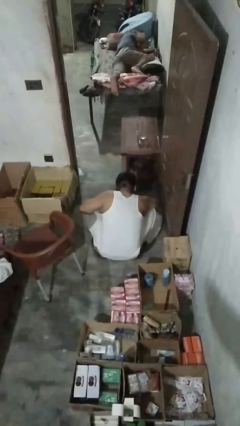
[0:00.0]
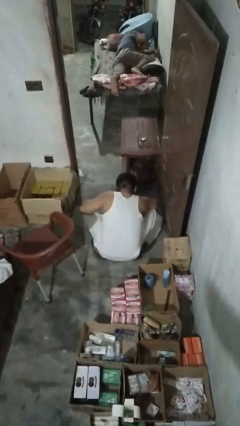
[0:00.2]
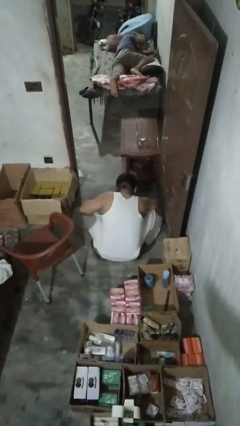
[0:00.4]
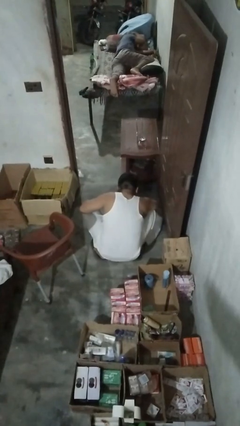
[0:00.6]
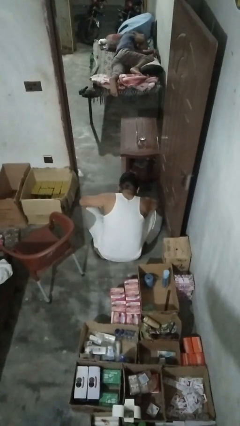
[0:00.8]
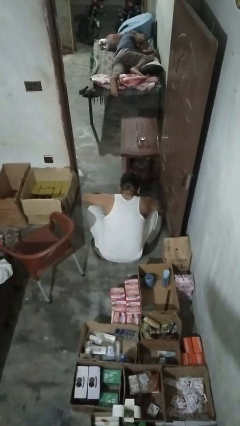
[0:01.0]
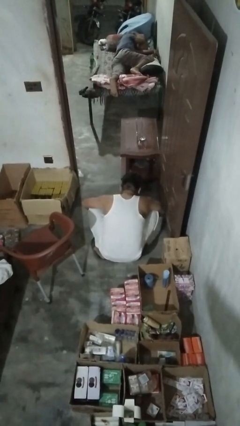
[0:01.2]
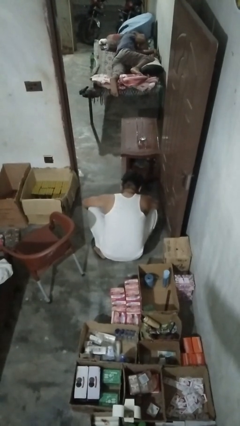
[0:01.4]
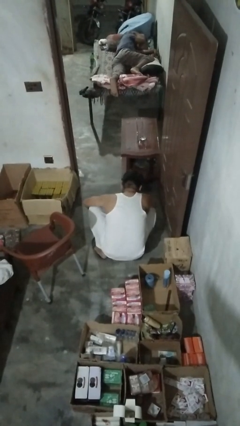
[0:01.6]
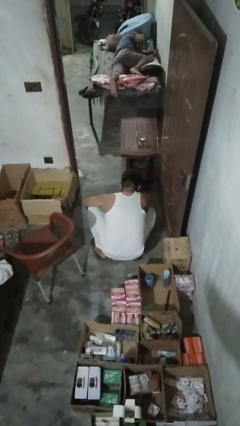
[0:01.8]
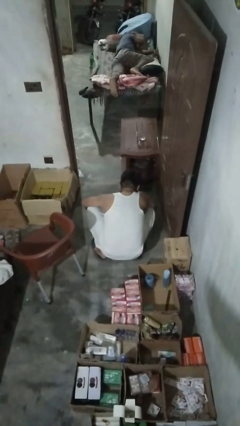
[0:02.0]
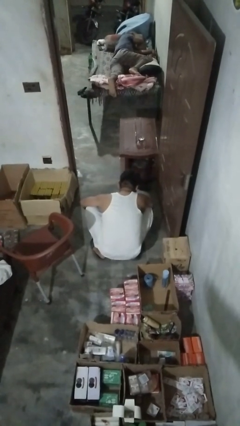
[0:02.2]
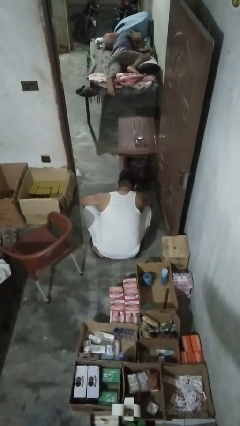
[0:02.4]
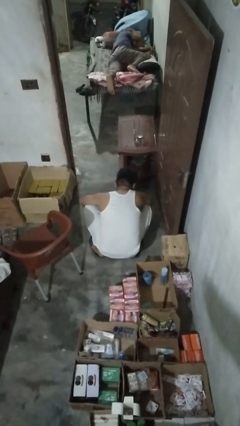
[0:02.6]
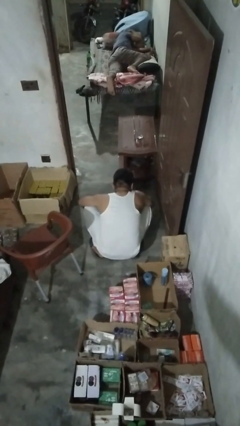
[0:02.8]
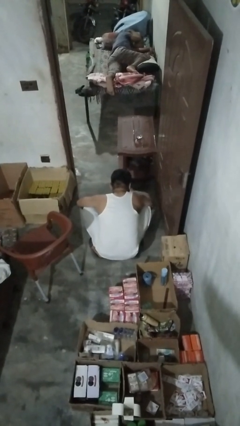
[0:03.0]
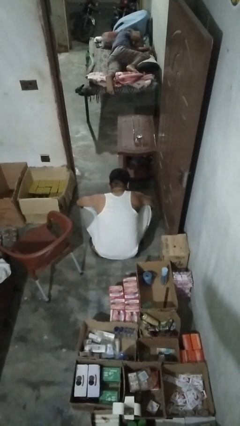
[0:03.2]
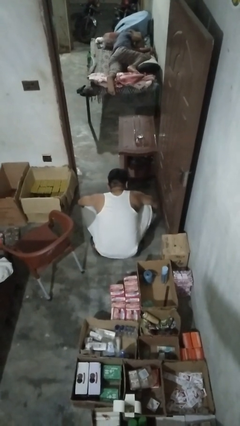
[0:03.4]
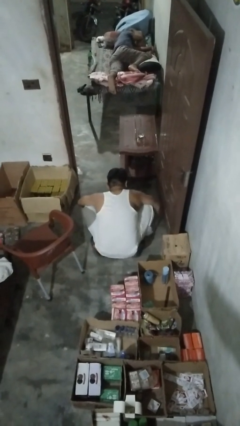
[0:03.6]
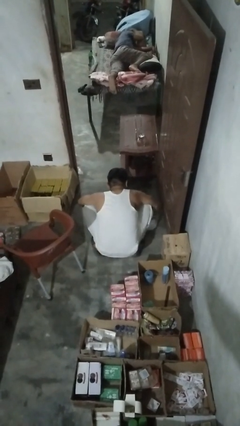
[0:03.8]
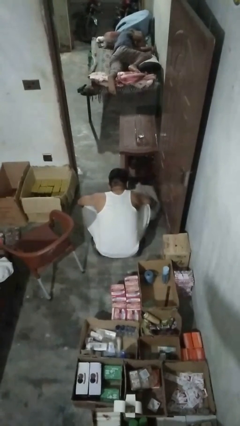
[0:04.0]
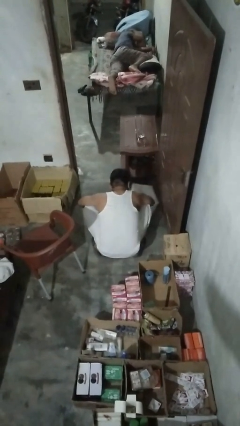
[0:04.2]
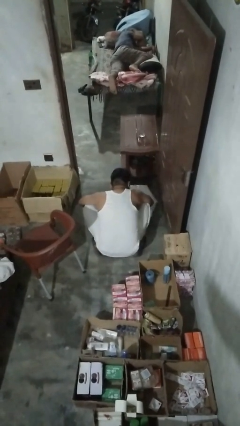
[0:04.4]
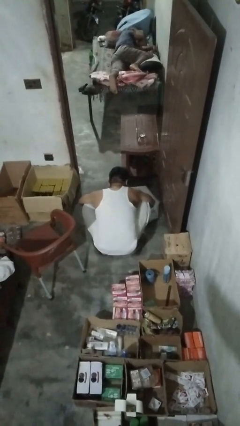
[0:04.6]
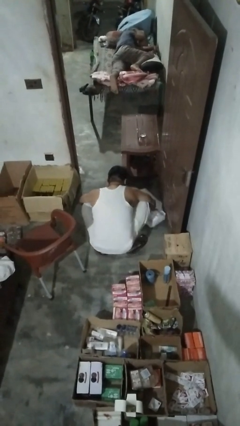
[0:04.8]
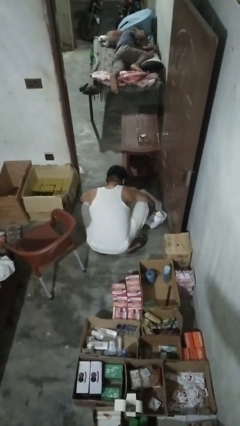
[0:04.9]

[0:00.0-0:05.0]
person mops

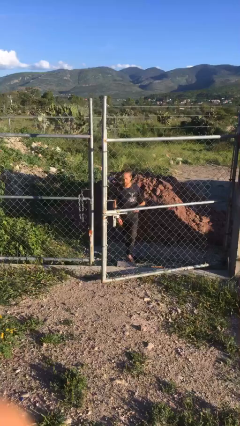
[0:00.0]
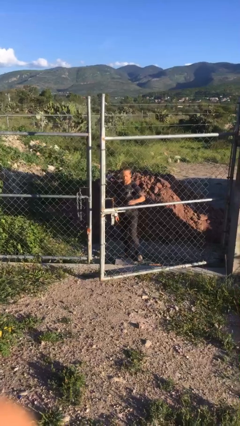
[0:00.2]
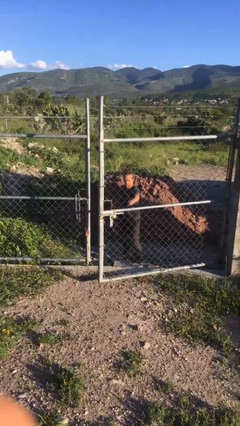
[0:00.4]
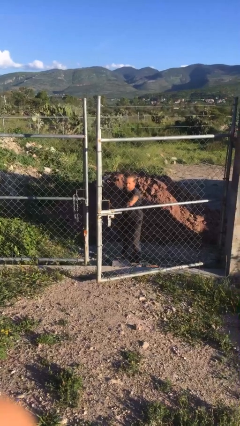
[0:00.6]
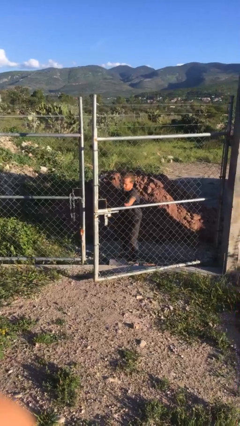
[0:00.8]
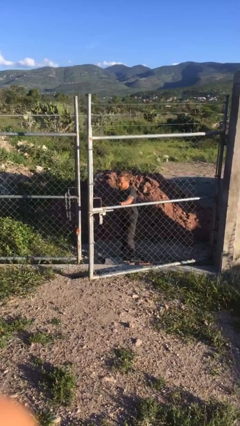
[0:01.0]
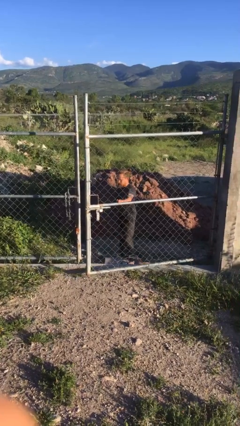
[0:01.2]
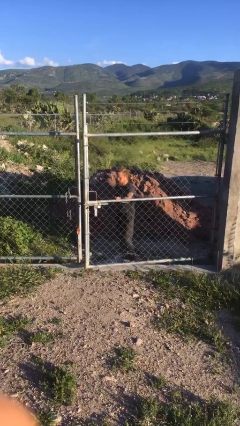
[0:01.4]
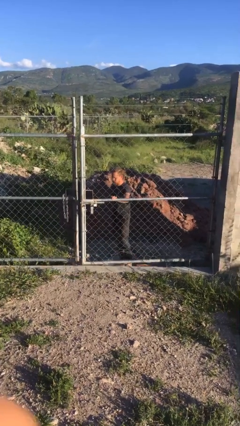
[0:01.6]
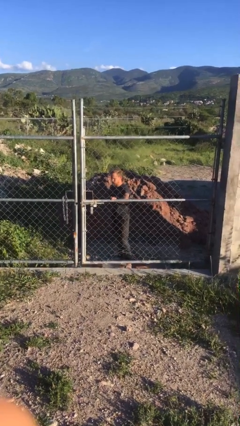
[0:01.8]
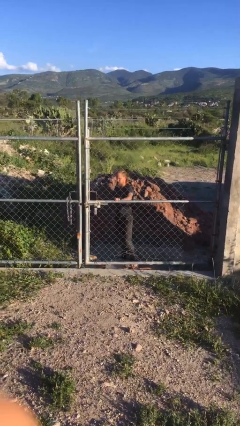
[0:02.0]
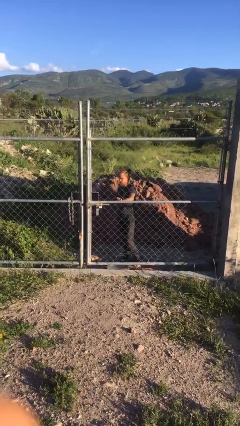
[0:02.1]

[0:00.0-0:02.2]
person closes gate

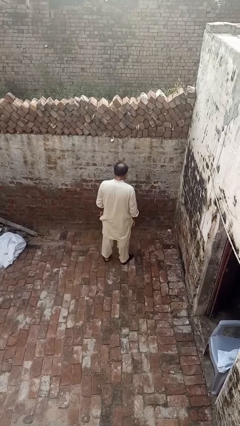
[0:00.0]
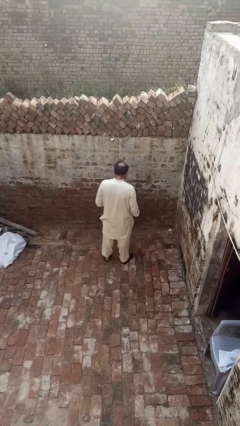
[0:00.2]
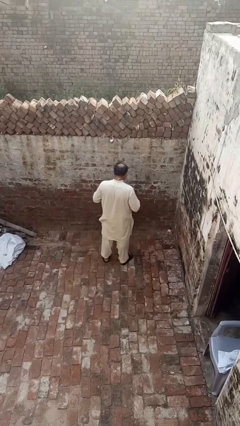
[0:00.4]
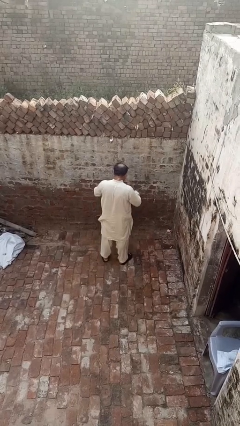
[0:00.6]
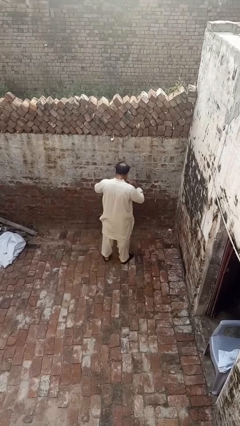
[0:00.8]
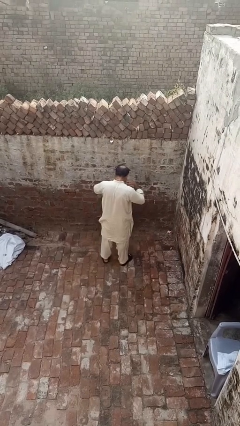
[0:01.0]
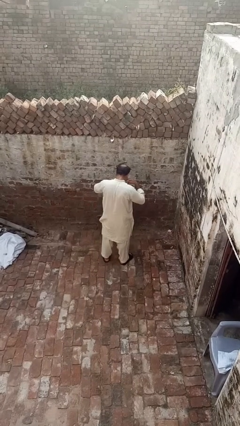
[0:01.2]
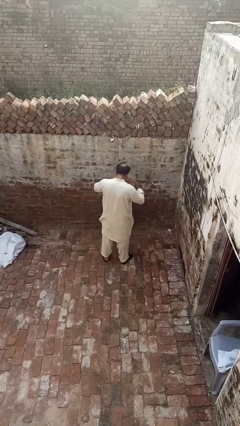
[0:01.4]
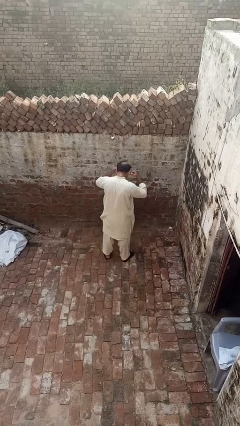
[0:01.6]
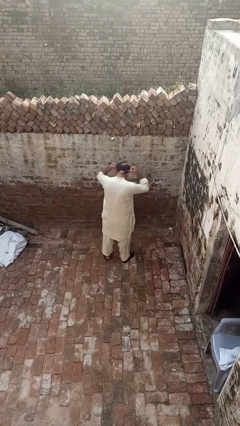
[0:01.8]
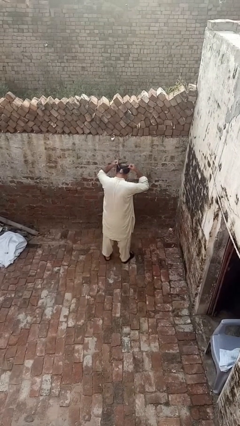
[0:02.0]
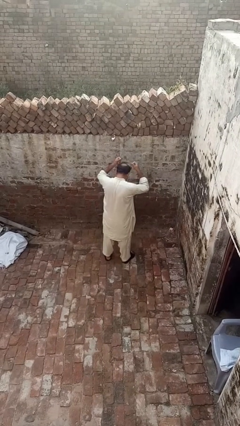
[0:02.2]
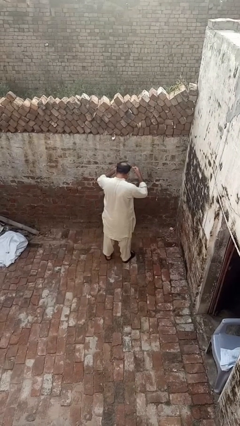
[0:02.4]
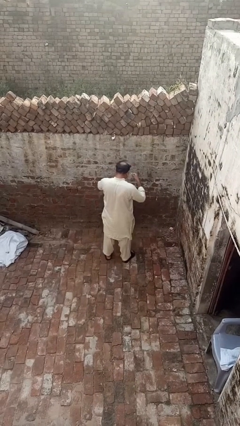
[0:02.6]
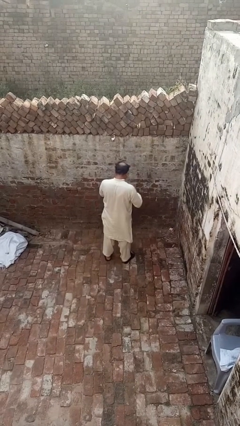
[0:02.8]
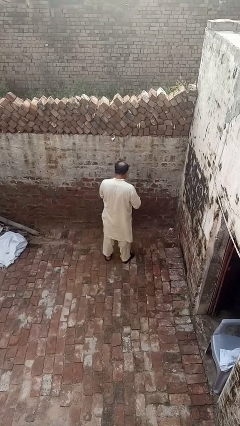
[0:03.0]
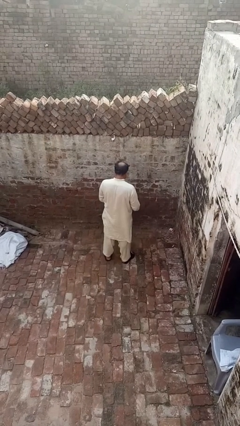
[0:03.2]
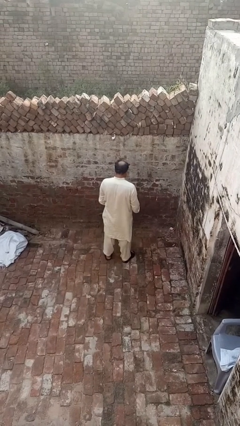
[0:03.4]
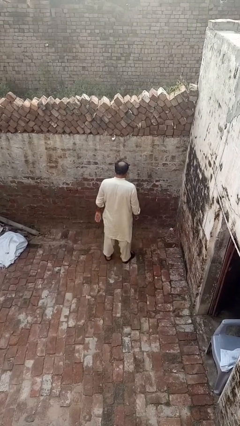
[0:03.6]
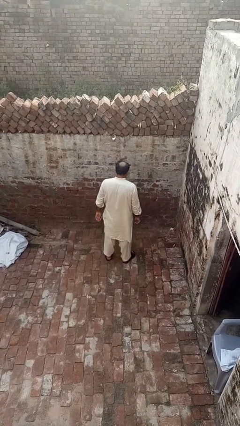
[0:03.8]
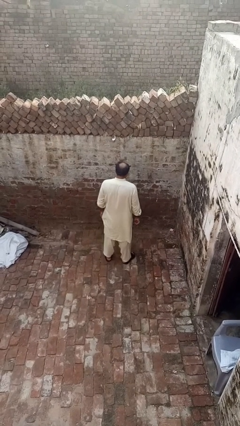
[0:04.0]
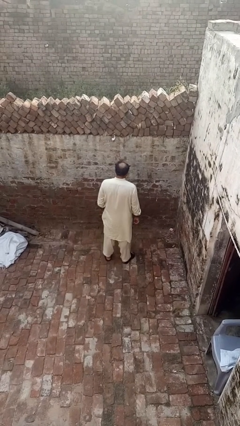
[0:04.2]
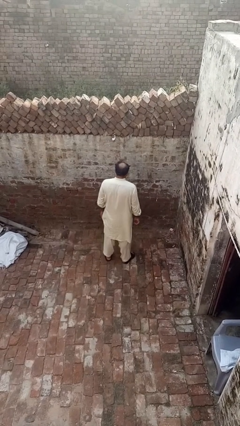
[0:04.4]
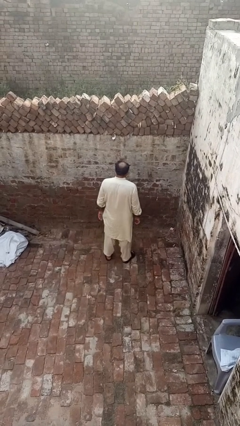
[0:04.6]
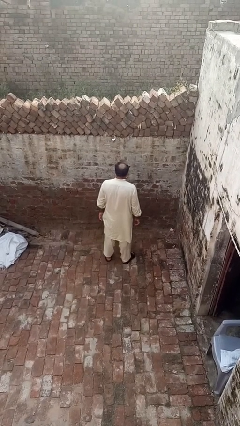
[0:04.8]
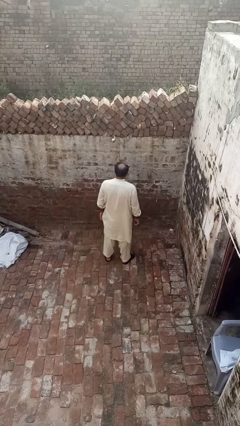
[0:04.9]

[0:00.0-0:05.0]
person takes off necklace

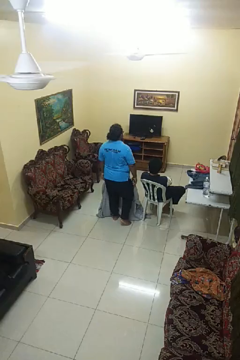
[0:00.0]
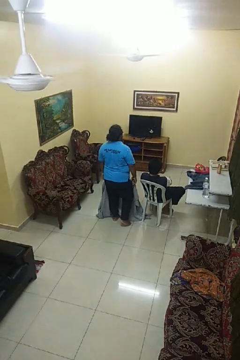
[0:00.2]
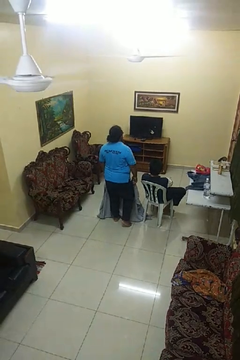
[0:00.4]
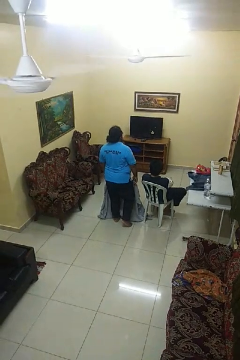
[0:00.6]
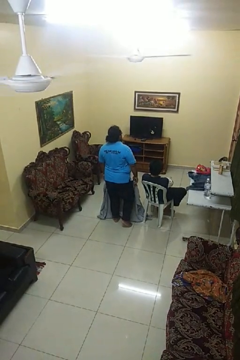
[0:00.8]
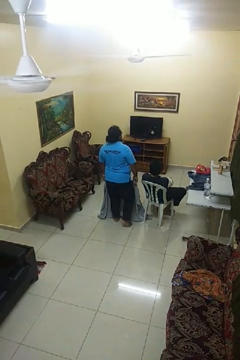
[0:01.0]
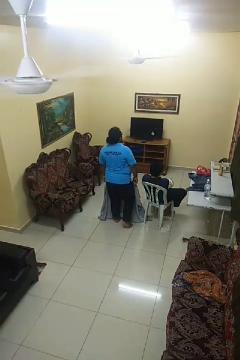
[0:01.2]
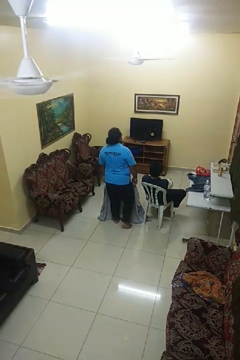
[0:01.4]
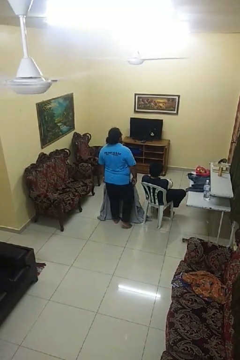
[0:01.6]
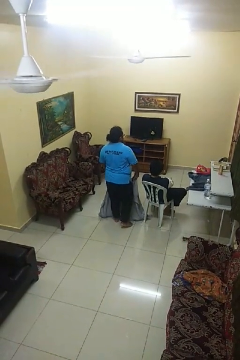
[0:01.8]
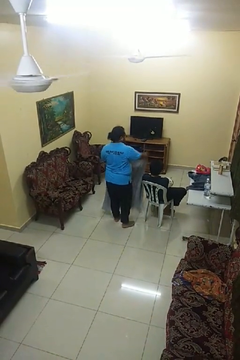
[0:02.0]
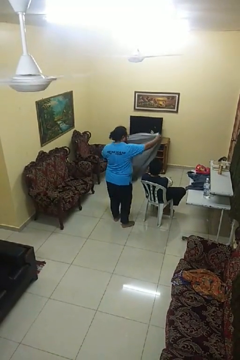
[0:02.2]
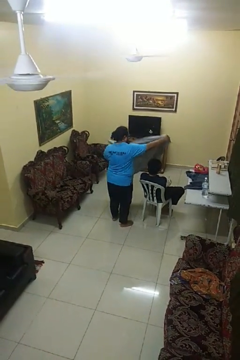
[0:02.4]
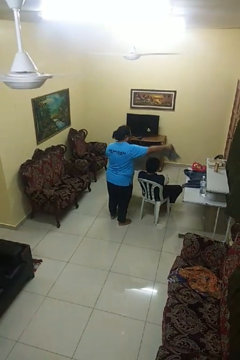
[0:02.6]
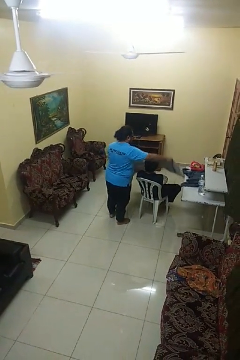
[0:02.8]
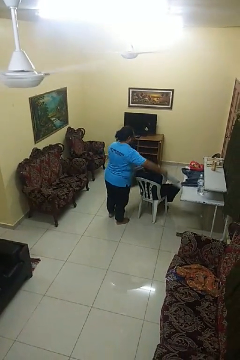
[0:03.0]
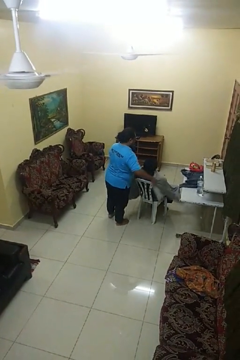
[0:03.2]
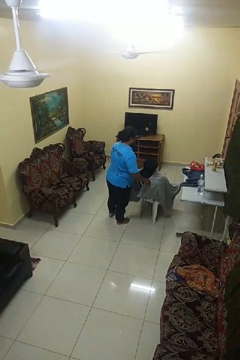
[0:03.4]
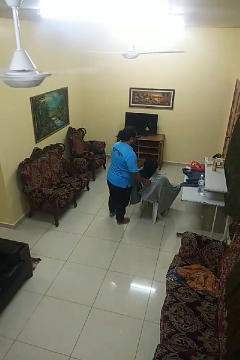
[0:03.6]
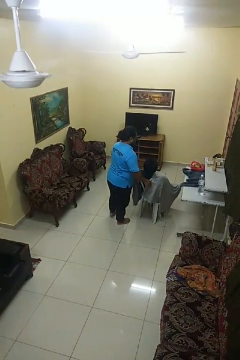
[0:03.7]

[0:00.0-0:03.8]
person covers friend with blanket

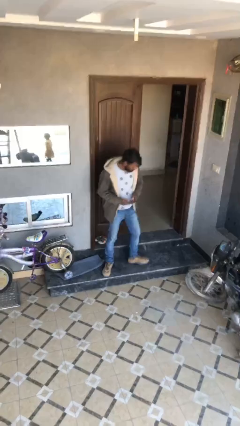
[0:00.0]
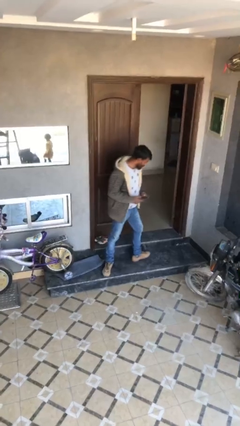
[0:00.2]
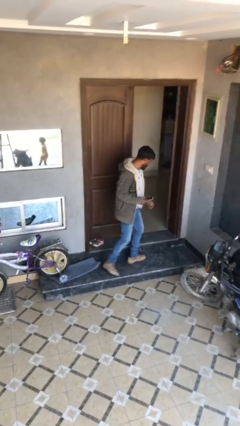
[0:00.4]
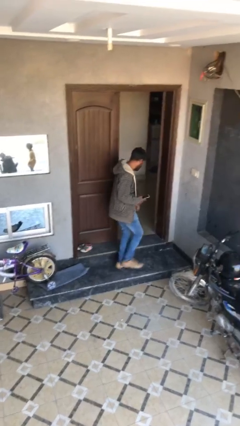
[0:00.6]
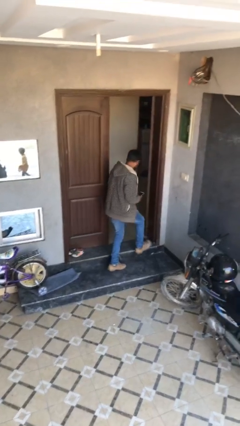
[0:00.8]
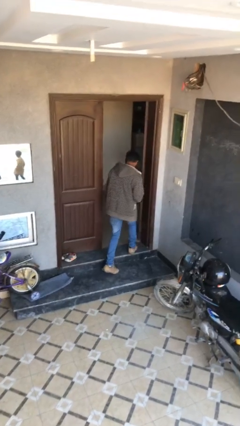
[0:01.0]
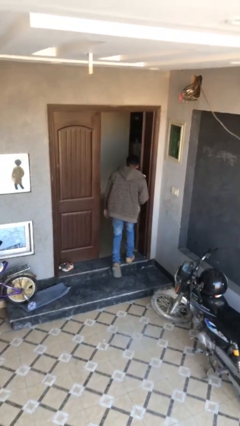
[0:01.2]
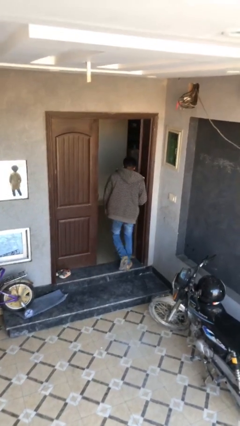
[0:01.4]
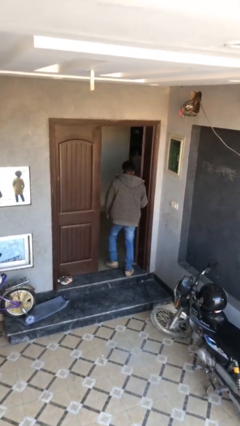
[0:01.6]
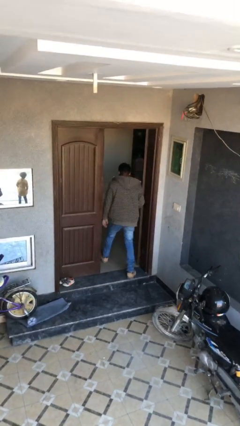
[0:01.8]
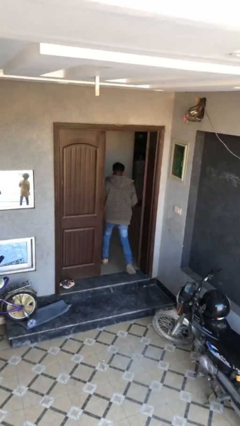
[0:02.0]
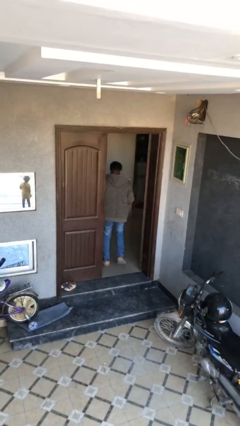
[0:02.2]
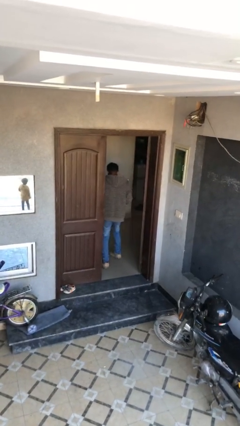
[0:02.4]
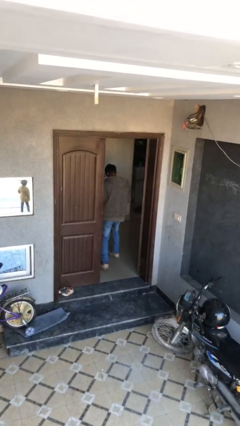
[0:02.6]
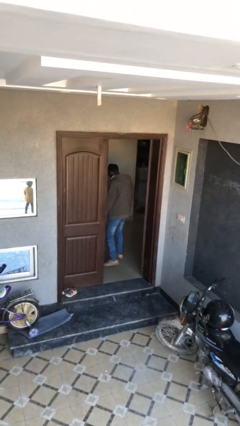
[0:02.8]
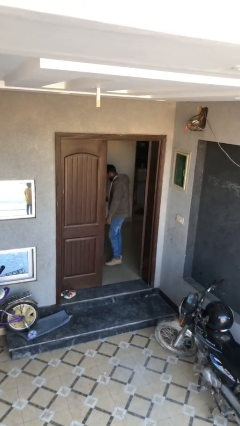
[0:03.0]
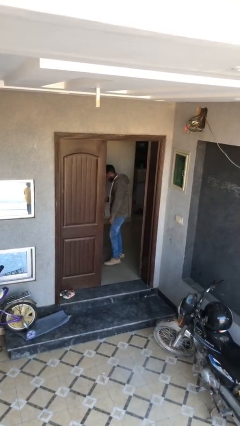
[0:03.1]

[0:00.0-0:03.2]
person exits scene through structure
